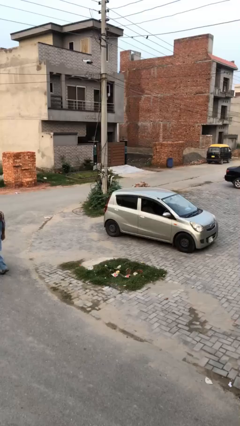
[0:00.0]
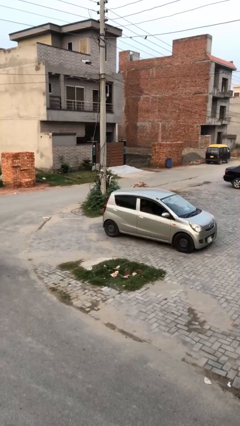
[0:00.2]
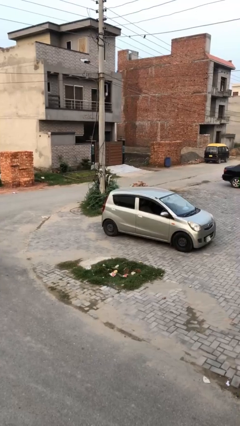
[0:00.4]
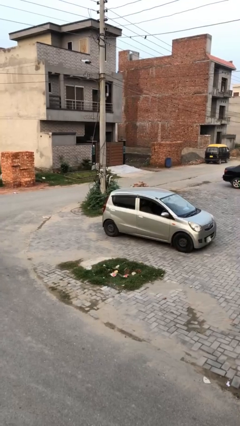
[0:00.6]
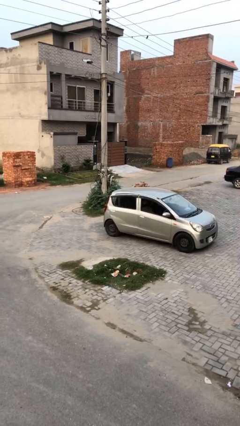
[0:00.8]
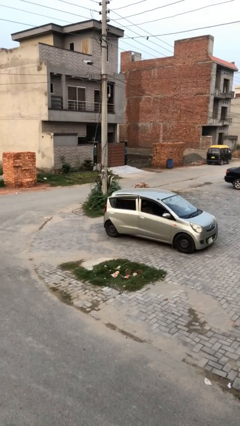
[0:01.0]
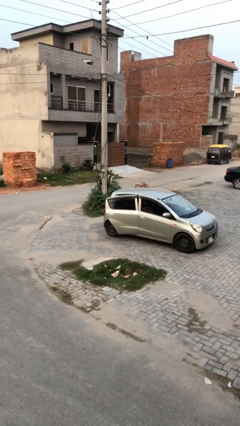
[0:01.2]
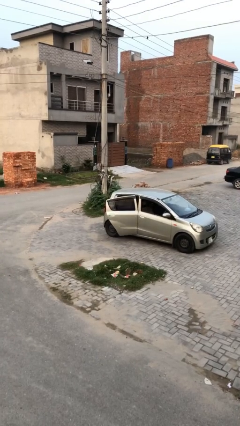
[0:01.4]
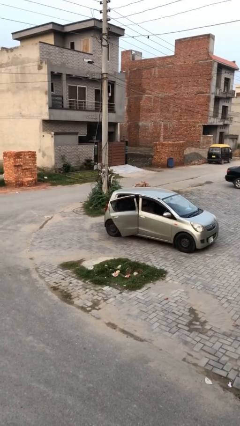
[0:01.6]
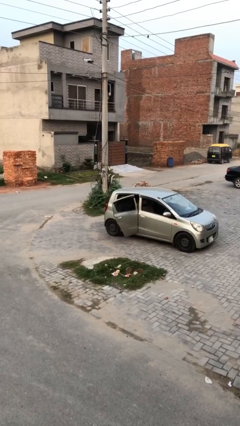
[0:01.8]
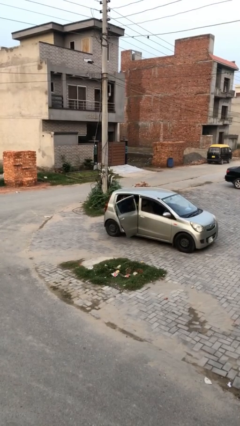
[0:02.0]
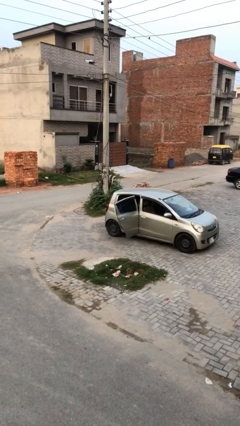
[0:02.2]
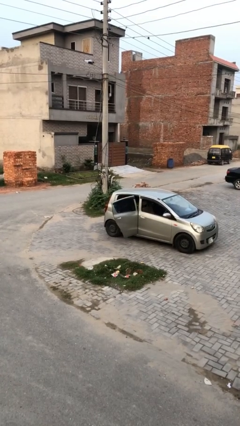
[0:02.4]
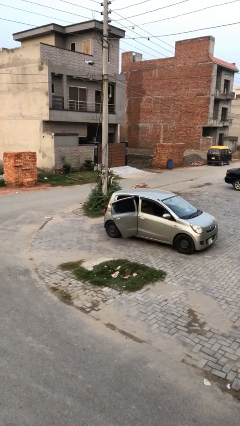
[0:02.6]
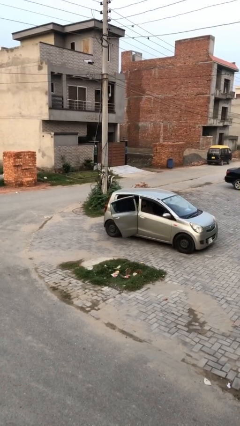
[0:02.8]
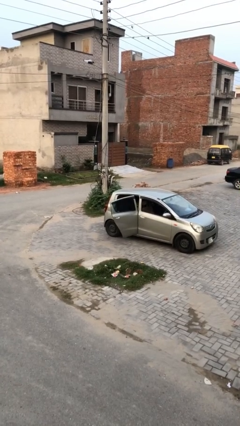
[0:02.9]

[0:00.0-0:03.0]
person opens car door

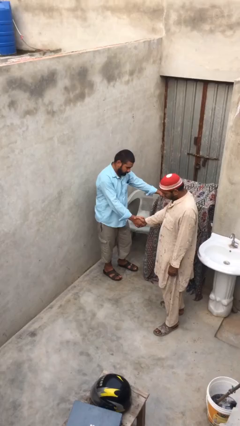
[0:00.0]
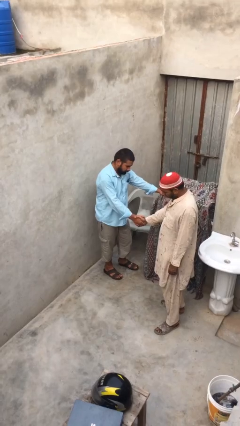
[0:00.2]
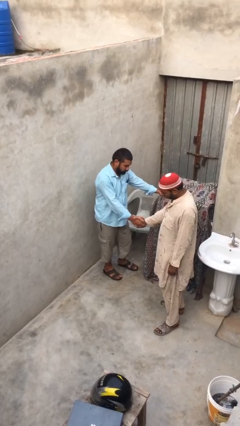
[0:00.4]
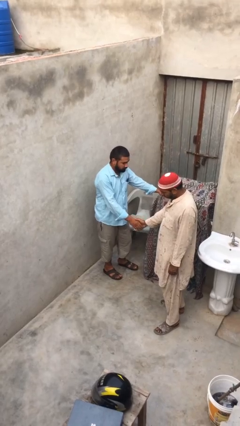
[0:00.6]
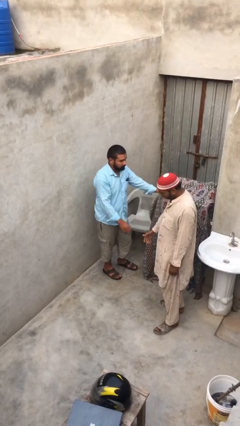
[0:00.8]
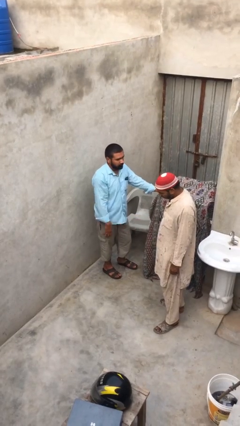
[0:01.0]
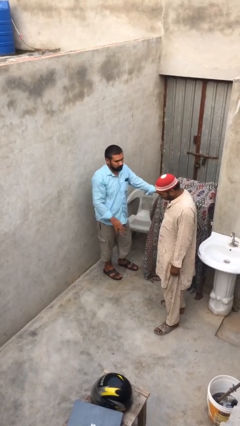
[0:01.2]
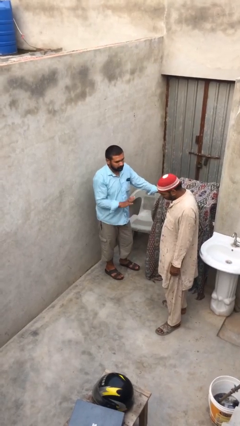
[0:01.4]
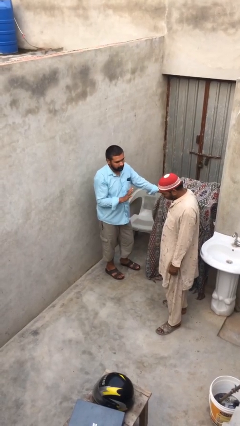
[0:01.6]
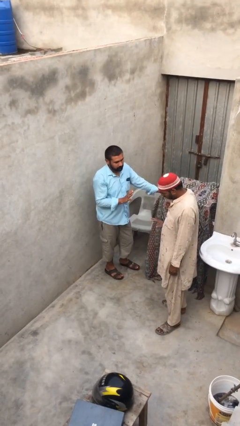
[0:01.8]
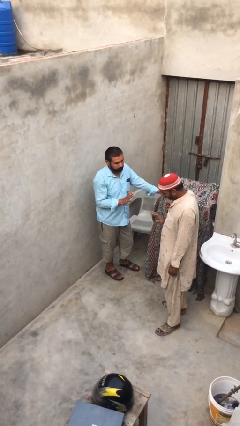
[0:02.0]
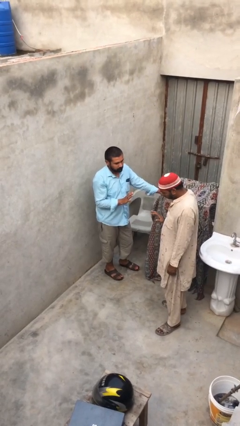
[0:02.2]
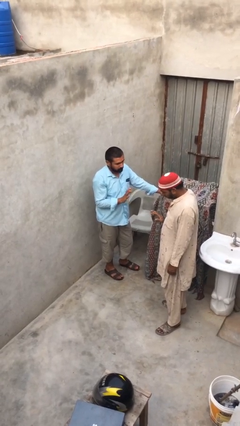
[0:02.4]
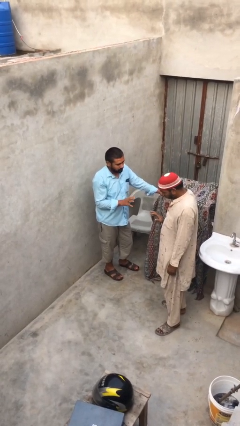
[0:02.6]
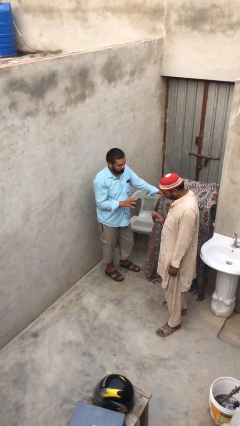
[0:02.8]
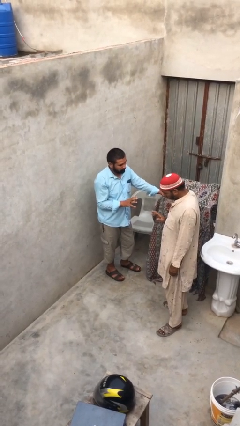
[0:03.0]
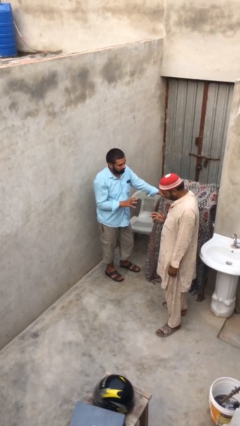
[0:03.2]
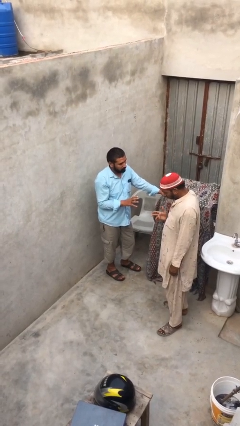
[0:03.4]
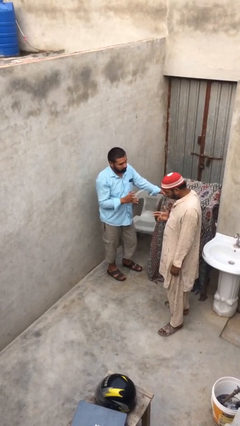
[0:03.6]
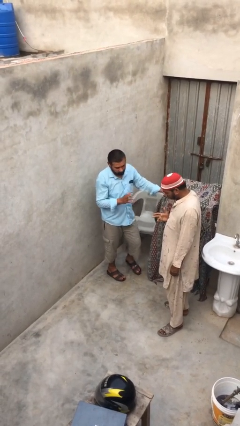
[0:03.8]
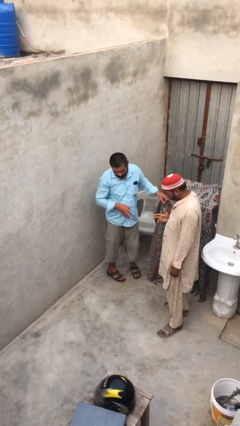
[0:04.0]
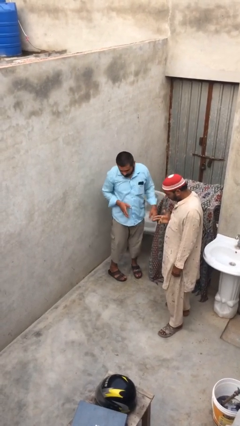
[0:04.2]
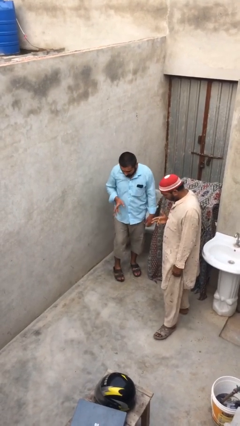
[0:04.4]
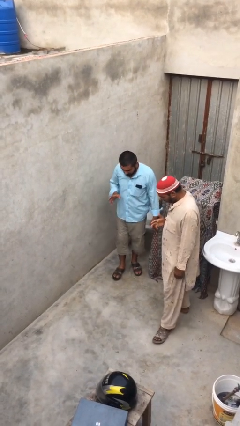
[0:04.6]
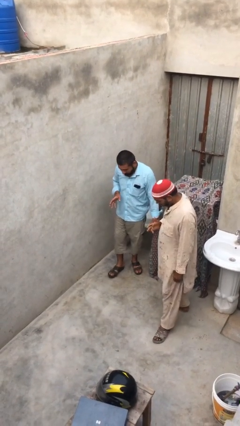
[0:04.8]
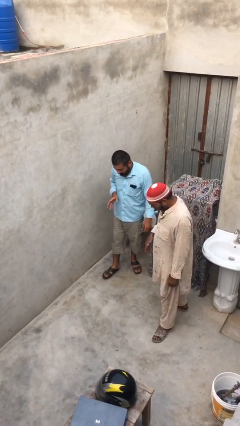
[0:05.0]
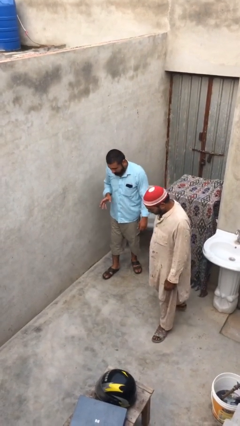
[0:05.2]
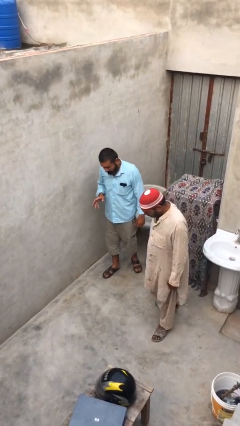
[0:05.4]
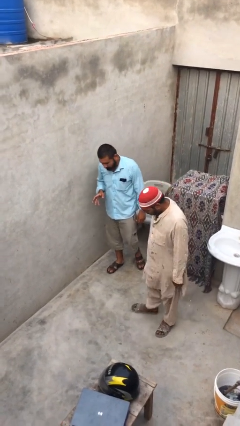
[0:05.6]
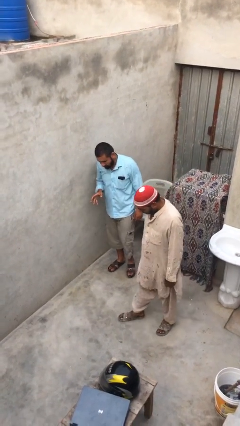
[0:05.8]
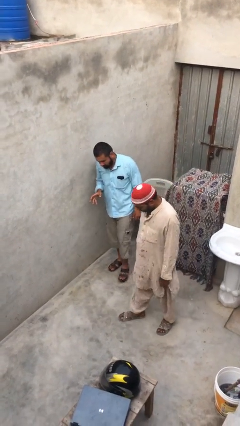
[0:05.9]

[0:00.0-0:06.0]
person talks to person

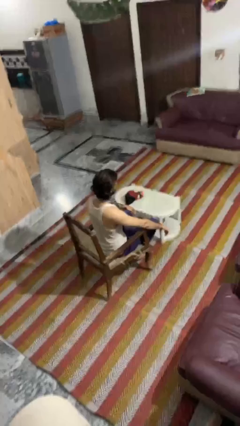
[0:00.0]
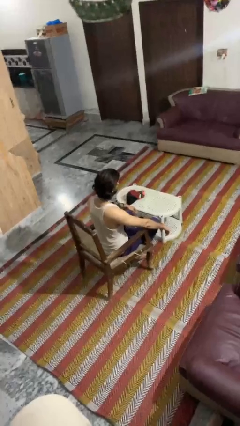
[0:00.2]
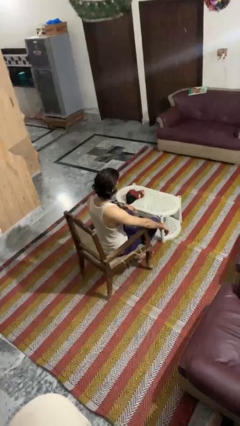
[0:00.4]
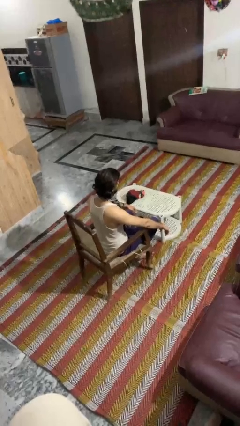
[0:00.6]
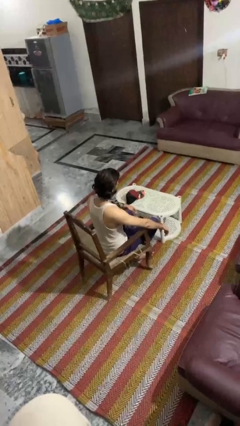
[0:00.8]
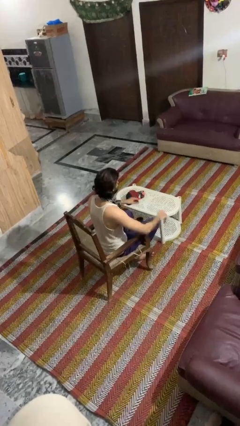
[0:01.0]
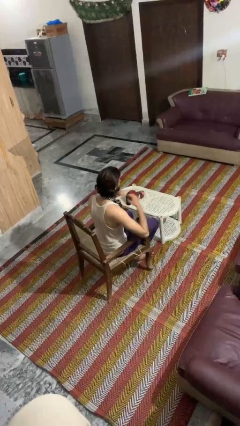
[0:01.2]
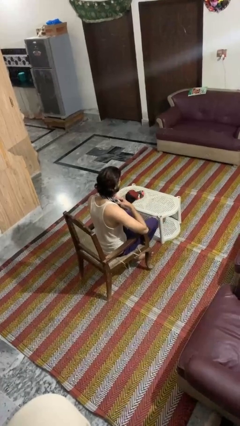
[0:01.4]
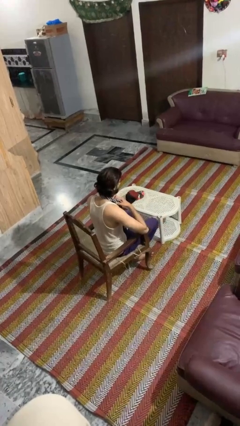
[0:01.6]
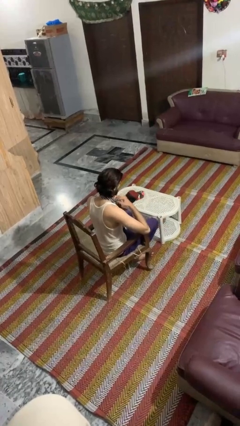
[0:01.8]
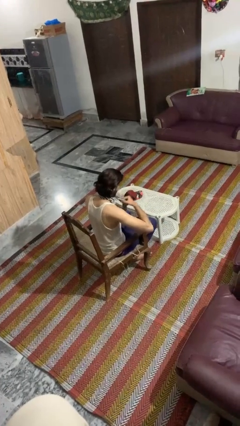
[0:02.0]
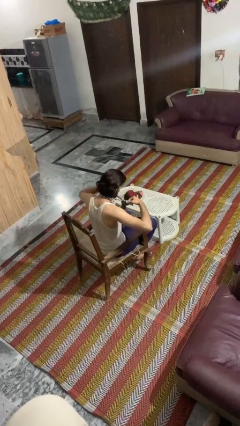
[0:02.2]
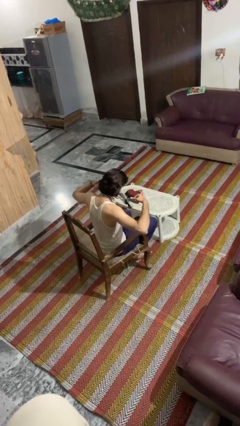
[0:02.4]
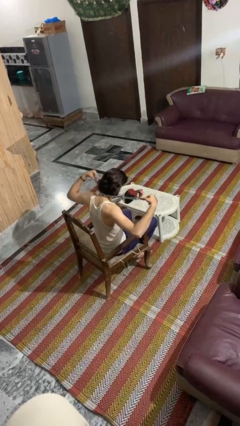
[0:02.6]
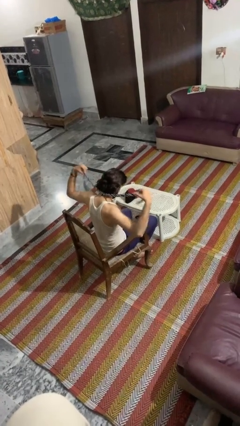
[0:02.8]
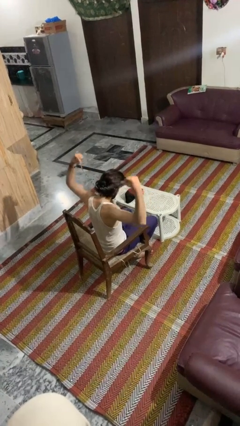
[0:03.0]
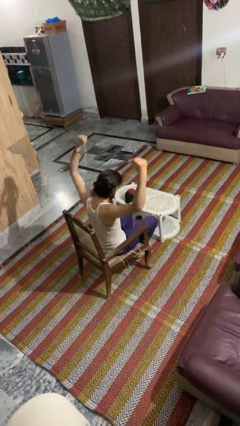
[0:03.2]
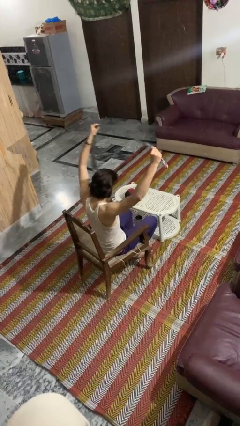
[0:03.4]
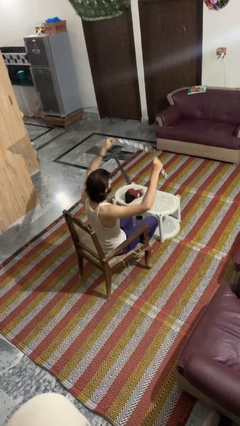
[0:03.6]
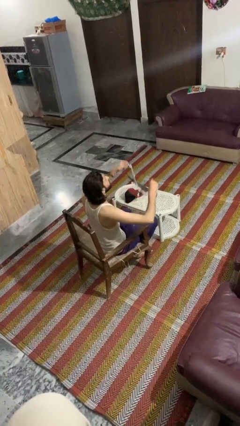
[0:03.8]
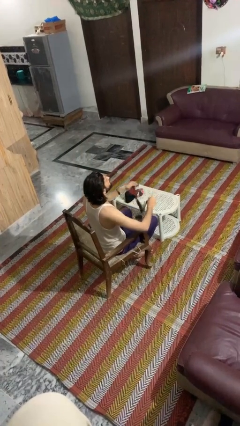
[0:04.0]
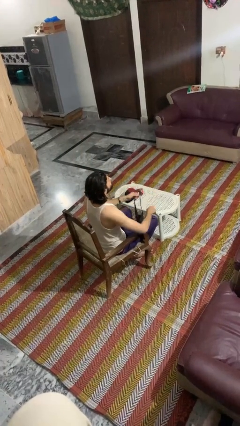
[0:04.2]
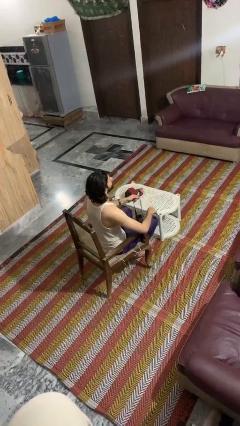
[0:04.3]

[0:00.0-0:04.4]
person takes off necktie

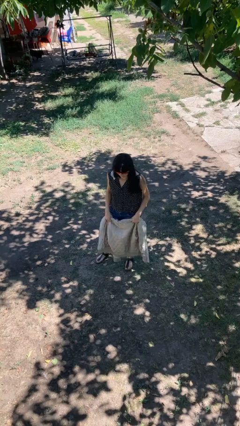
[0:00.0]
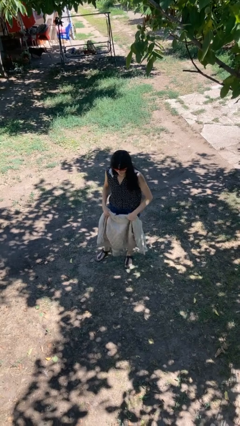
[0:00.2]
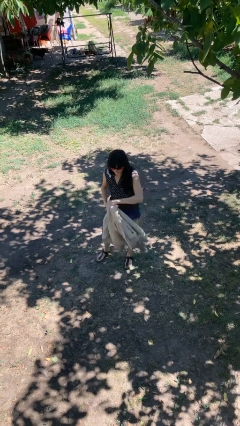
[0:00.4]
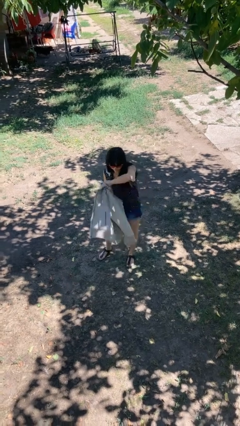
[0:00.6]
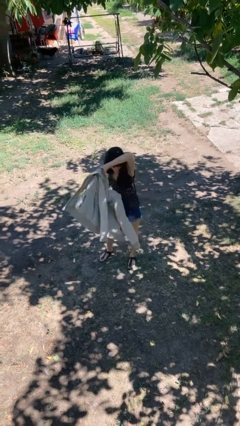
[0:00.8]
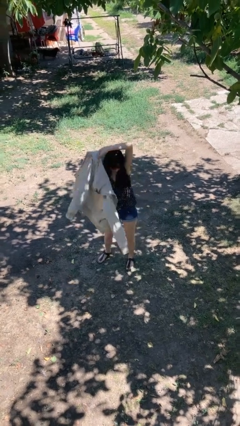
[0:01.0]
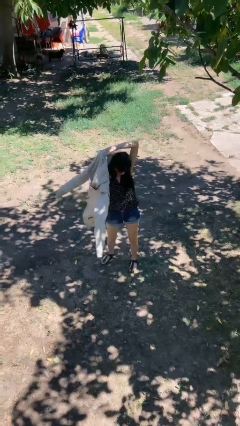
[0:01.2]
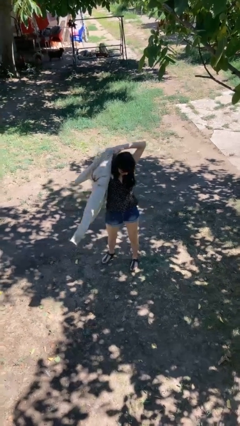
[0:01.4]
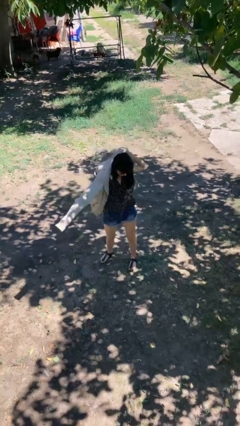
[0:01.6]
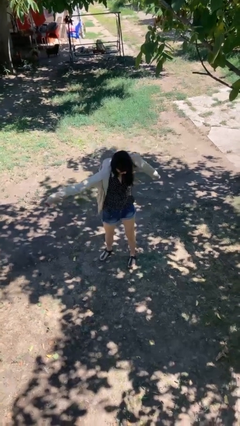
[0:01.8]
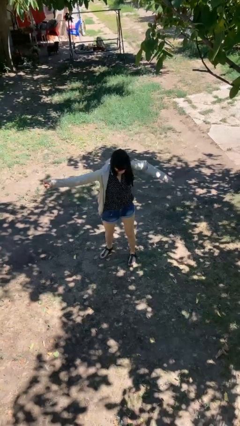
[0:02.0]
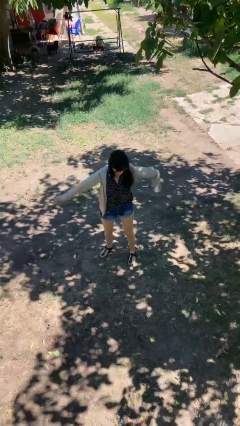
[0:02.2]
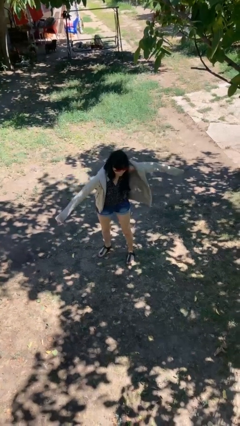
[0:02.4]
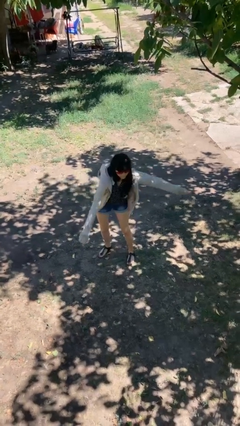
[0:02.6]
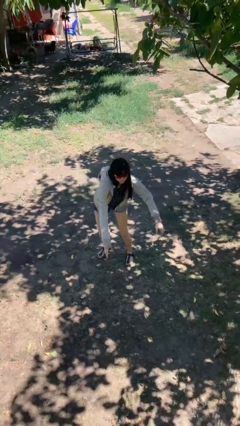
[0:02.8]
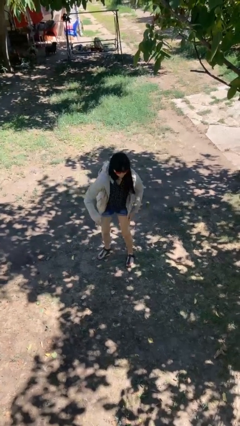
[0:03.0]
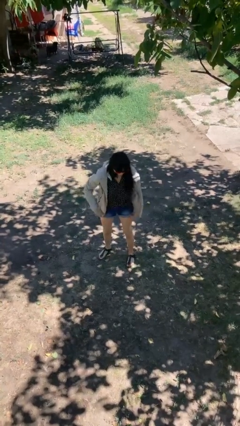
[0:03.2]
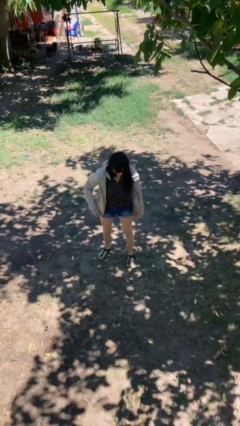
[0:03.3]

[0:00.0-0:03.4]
person puts on jacket

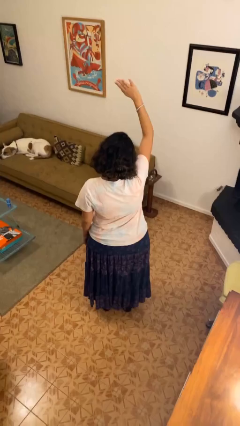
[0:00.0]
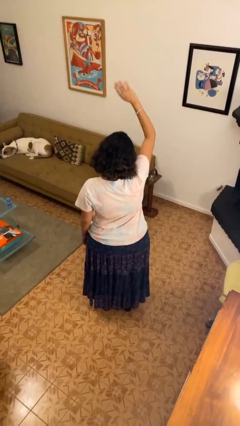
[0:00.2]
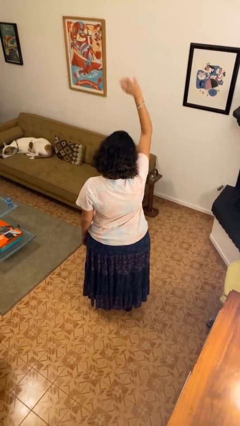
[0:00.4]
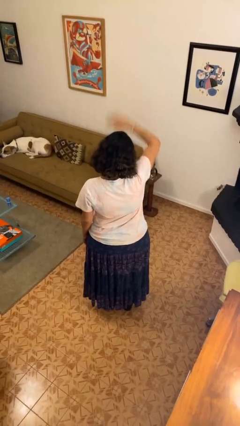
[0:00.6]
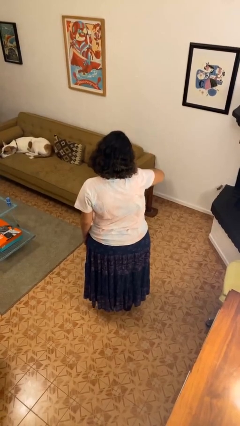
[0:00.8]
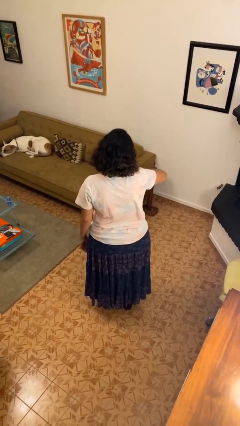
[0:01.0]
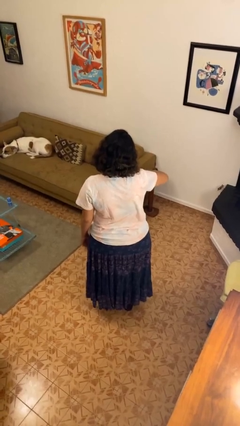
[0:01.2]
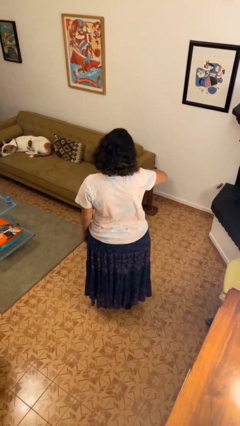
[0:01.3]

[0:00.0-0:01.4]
person gestures swipe down
